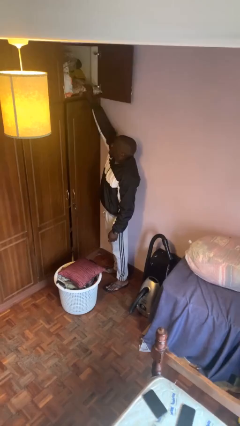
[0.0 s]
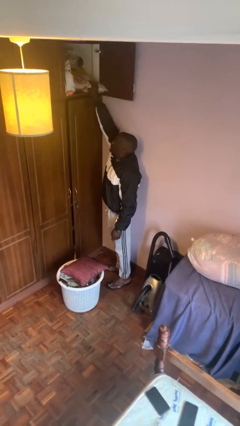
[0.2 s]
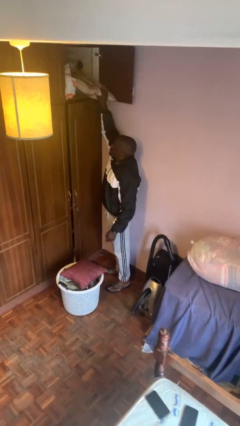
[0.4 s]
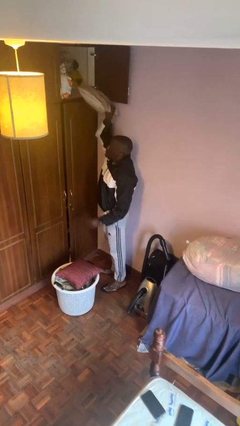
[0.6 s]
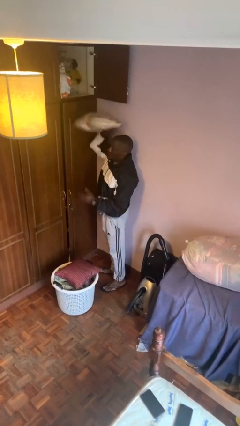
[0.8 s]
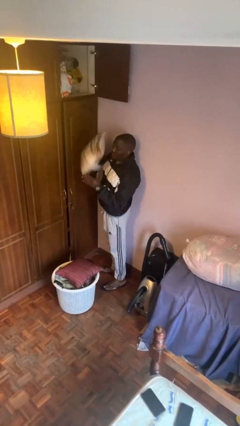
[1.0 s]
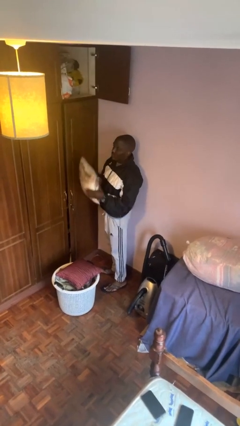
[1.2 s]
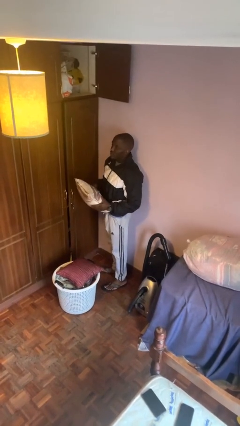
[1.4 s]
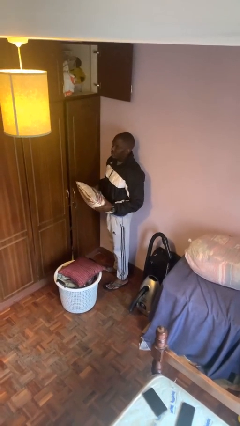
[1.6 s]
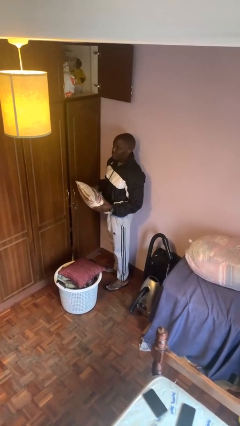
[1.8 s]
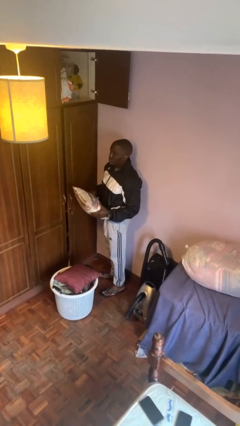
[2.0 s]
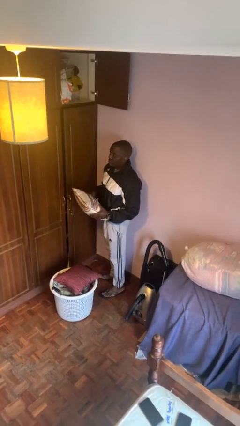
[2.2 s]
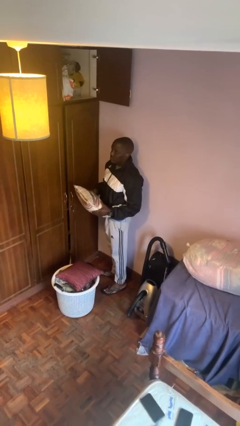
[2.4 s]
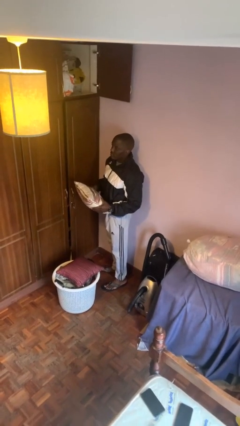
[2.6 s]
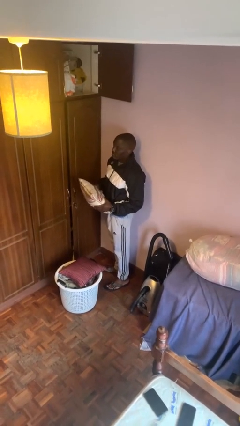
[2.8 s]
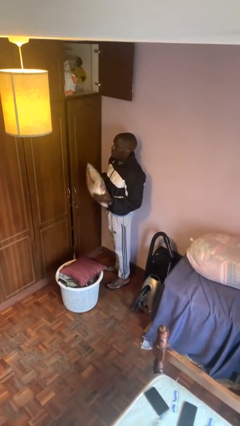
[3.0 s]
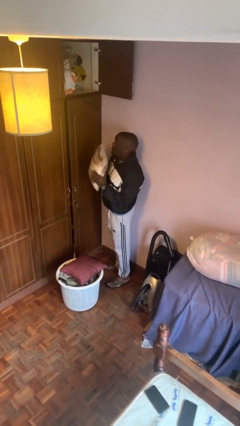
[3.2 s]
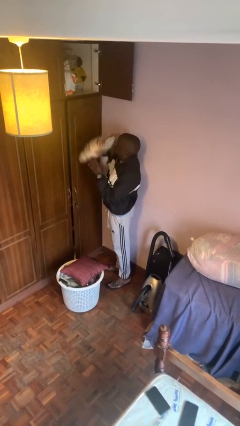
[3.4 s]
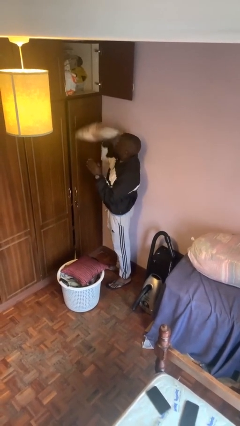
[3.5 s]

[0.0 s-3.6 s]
person picks up object from shelf

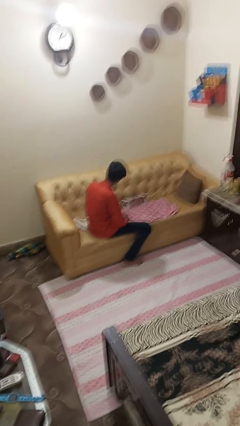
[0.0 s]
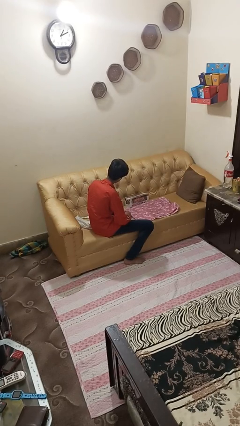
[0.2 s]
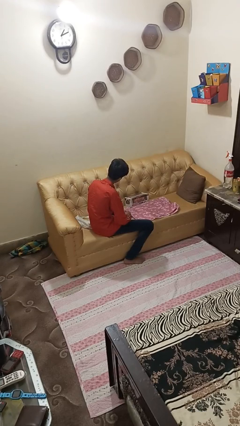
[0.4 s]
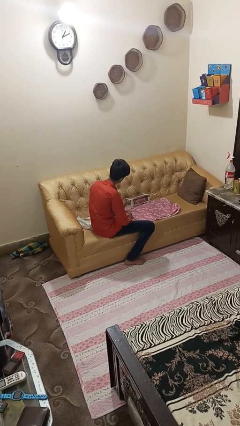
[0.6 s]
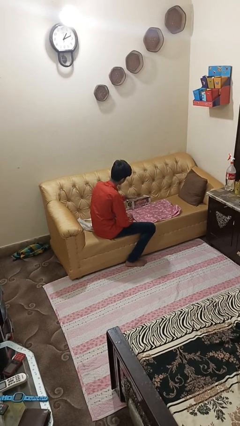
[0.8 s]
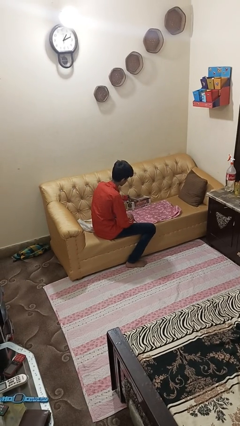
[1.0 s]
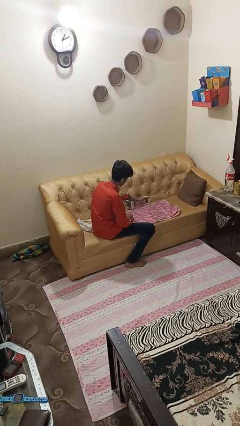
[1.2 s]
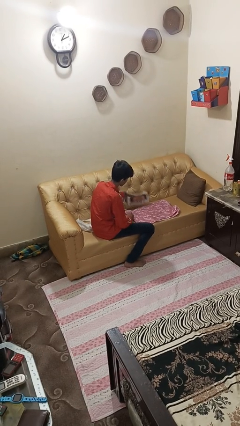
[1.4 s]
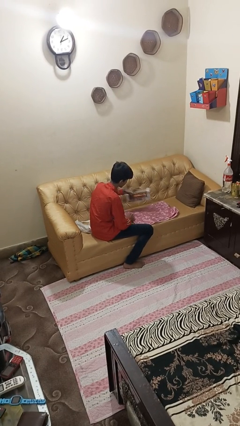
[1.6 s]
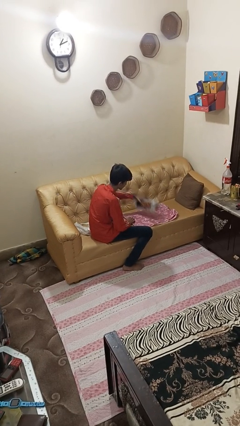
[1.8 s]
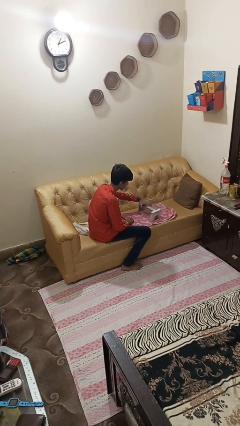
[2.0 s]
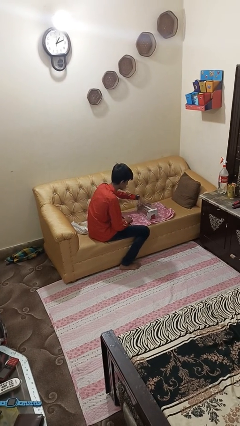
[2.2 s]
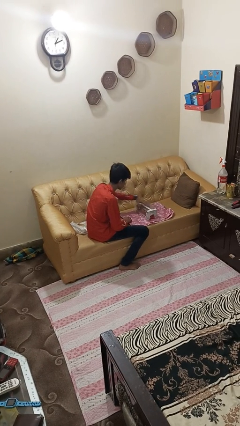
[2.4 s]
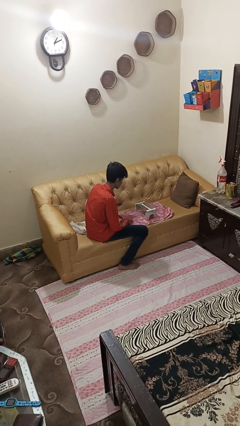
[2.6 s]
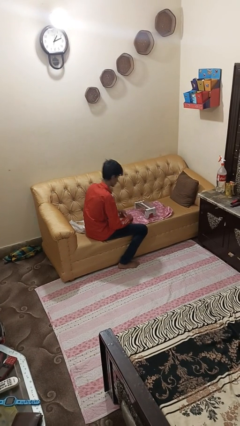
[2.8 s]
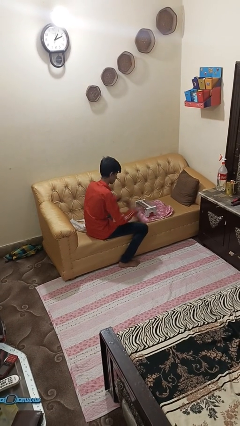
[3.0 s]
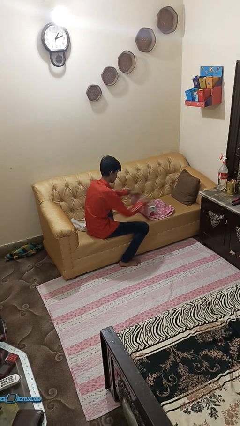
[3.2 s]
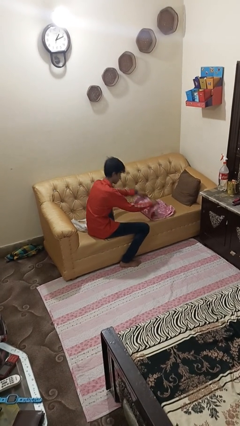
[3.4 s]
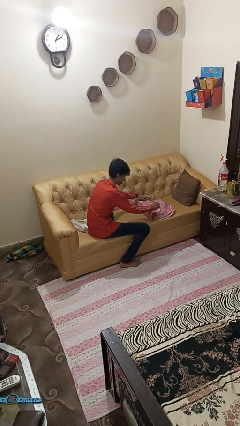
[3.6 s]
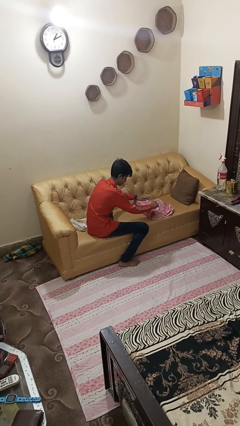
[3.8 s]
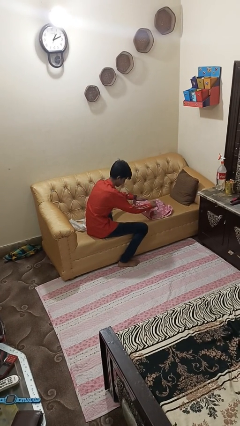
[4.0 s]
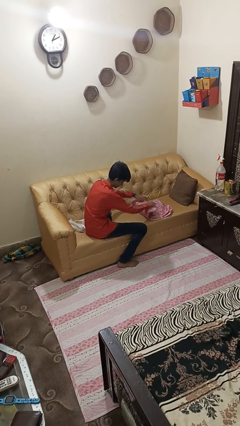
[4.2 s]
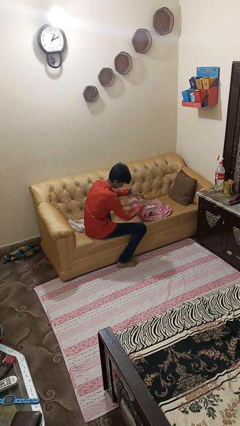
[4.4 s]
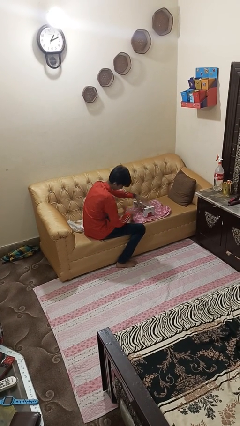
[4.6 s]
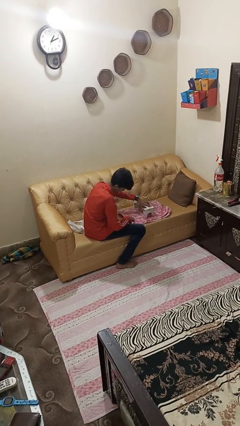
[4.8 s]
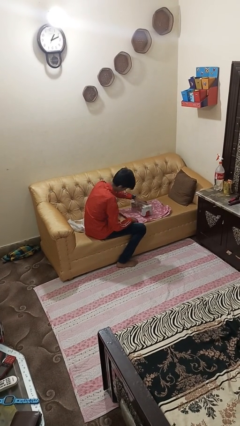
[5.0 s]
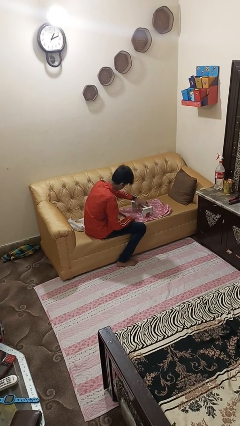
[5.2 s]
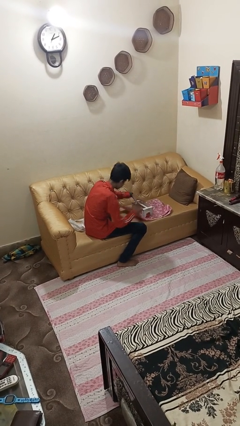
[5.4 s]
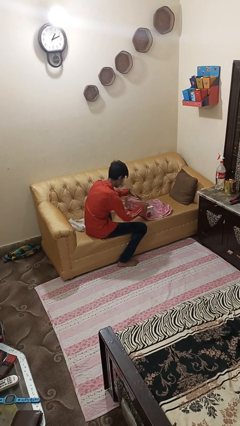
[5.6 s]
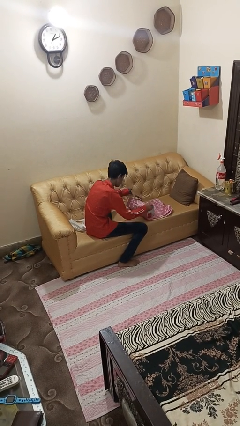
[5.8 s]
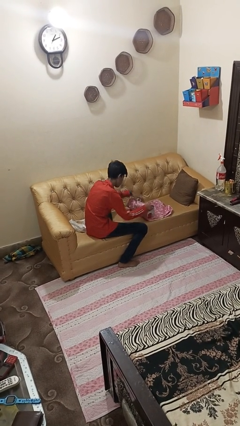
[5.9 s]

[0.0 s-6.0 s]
person wraps box

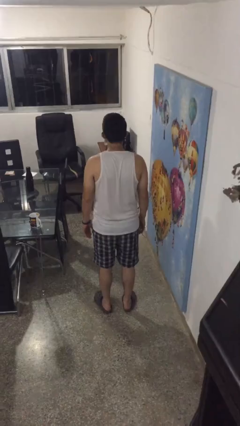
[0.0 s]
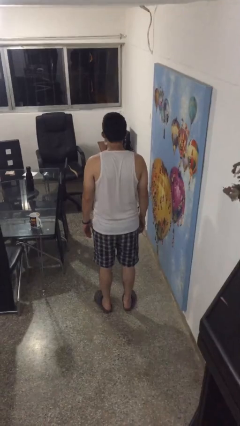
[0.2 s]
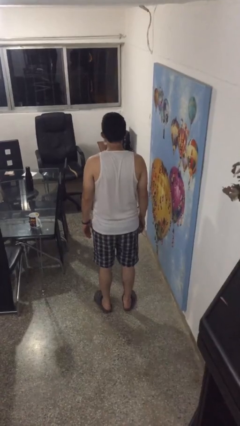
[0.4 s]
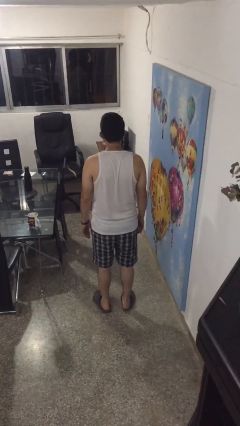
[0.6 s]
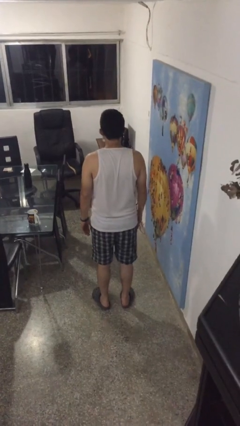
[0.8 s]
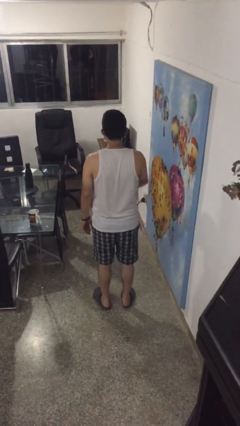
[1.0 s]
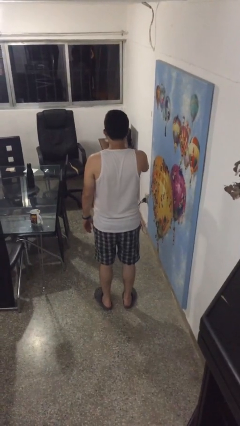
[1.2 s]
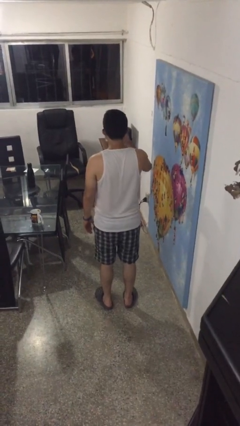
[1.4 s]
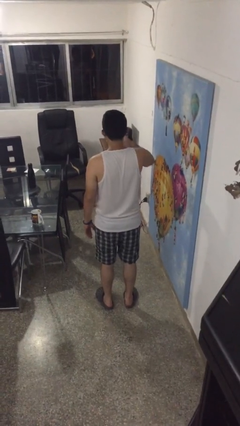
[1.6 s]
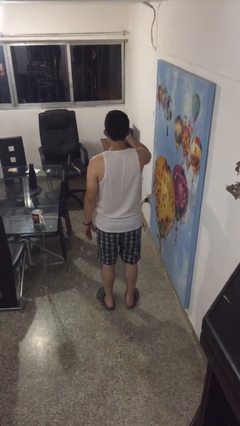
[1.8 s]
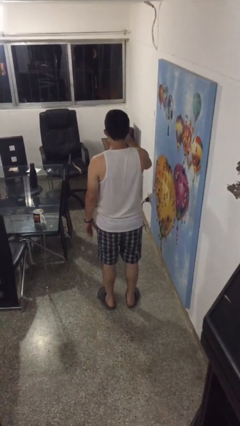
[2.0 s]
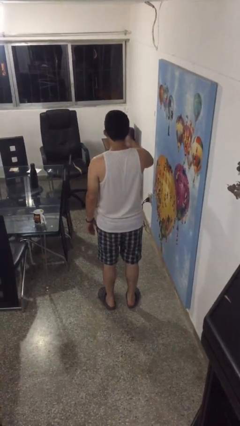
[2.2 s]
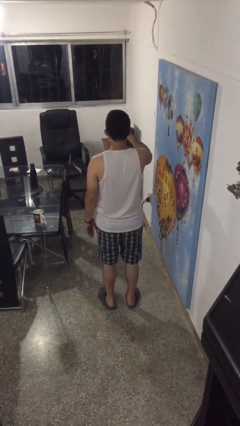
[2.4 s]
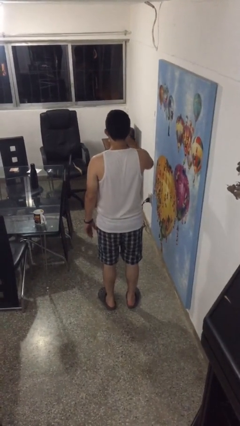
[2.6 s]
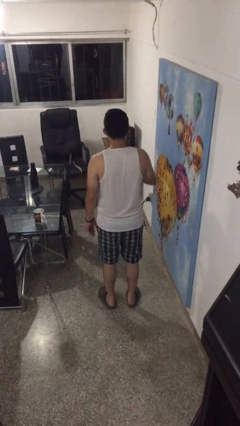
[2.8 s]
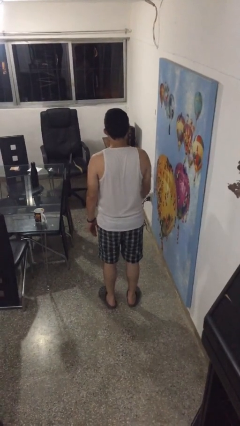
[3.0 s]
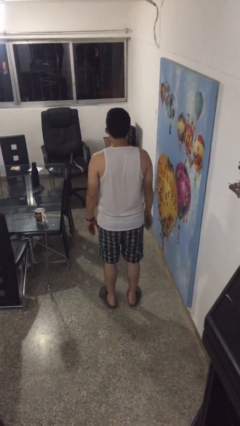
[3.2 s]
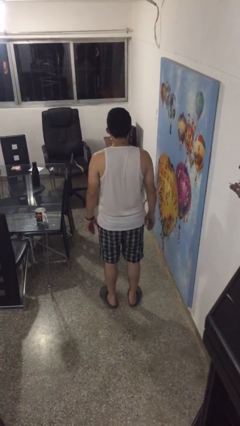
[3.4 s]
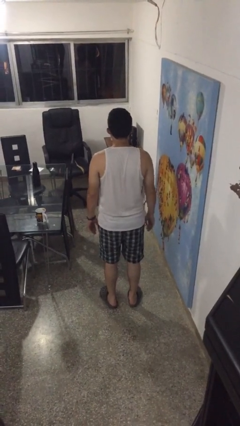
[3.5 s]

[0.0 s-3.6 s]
person gestures come here

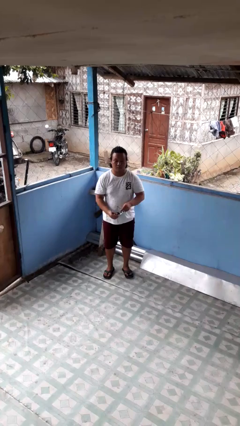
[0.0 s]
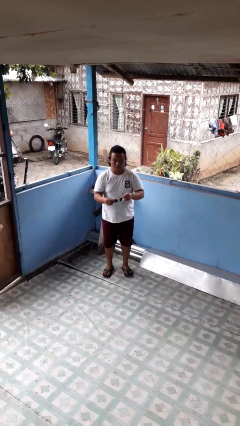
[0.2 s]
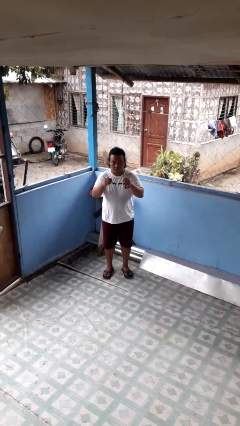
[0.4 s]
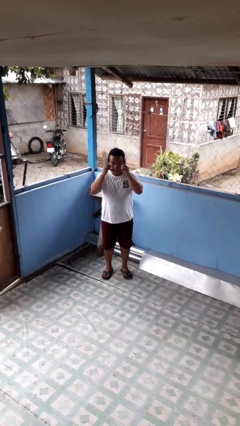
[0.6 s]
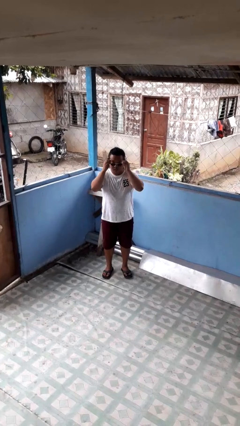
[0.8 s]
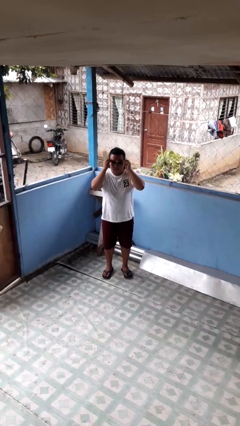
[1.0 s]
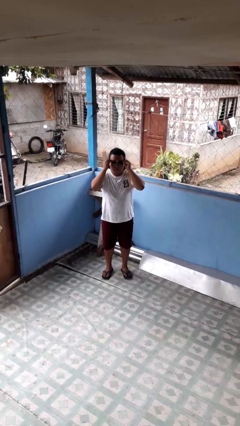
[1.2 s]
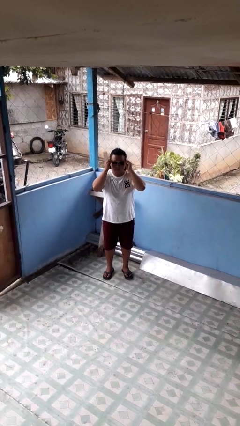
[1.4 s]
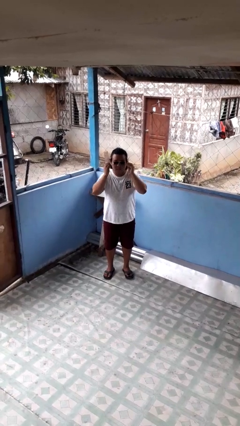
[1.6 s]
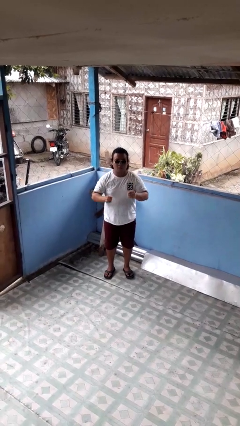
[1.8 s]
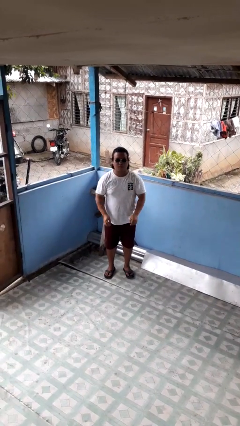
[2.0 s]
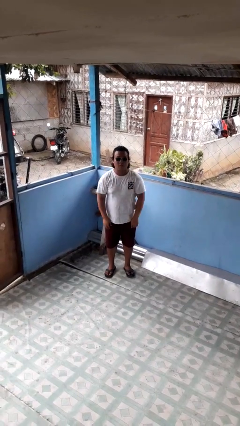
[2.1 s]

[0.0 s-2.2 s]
person puts on sunglasses

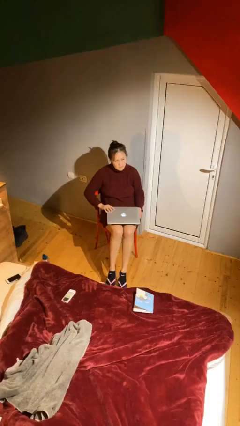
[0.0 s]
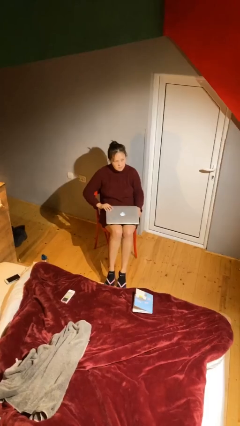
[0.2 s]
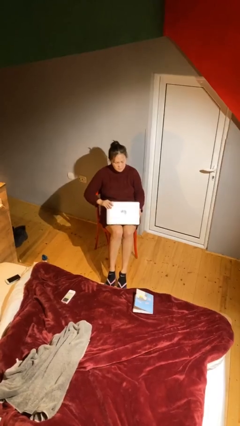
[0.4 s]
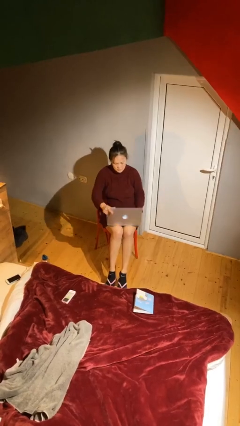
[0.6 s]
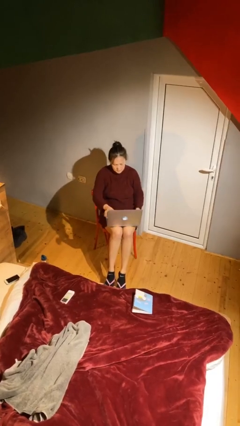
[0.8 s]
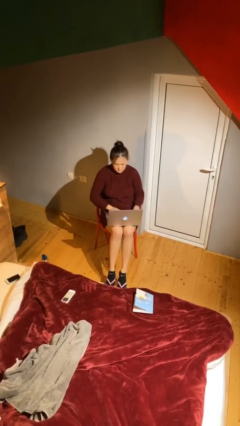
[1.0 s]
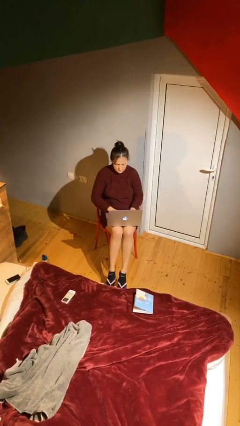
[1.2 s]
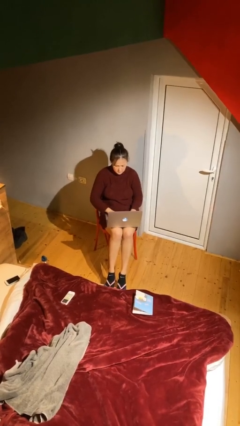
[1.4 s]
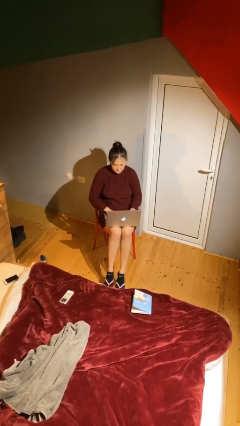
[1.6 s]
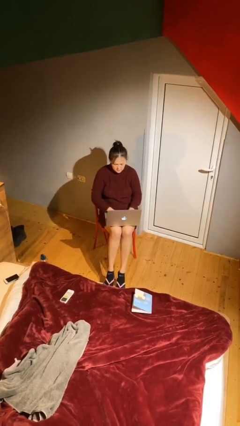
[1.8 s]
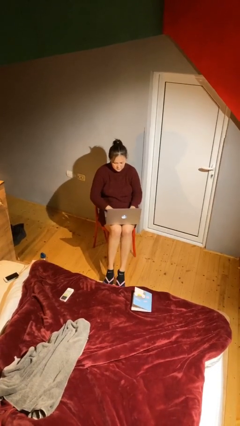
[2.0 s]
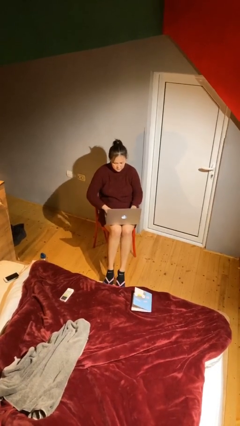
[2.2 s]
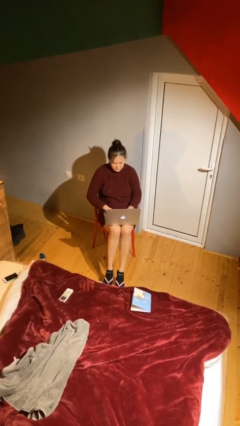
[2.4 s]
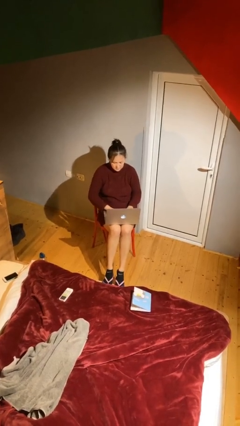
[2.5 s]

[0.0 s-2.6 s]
person interacts with laptop
